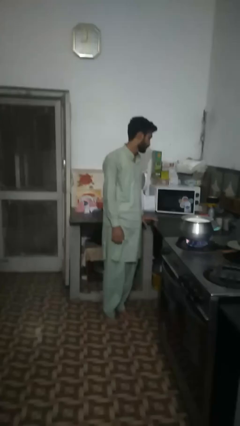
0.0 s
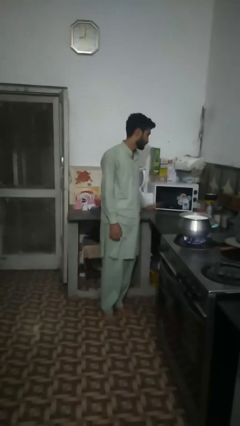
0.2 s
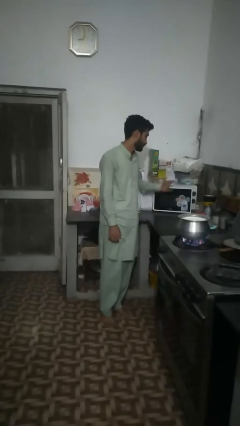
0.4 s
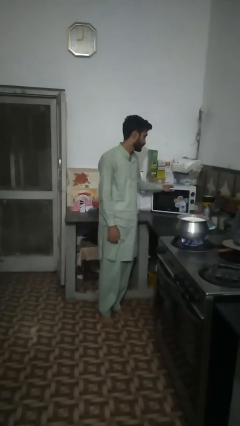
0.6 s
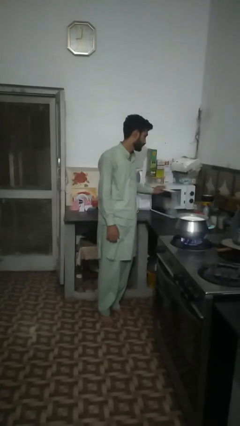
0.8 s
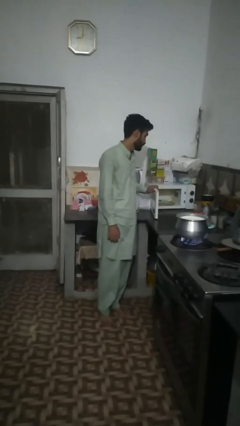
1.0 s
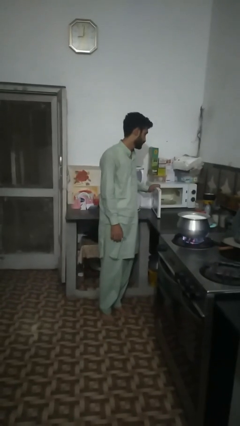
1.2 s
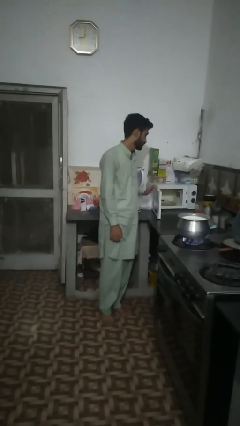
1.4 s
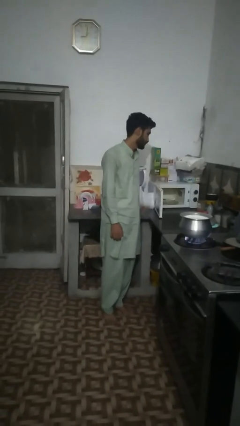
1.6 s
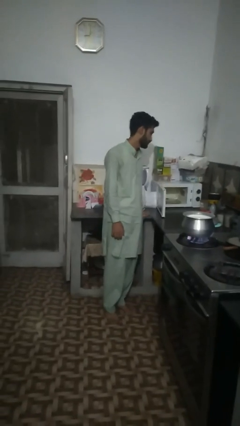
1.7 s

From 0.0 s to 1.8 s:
person opens microwave

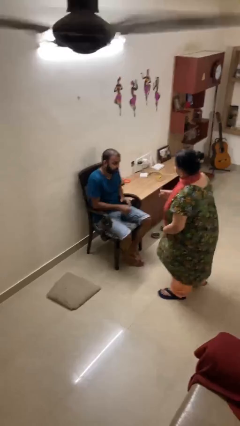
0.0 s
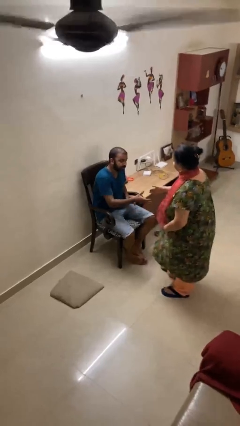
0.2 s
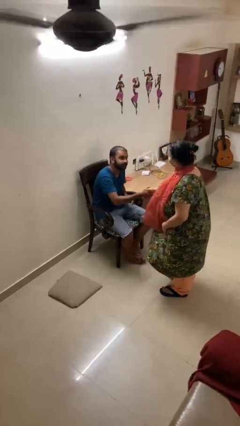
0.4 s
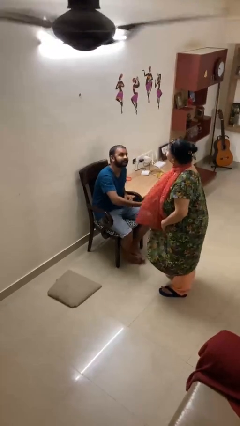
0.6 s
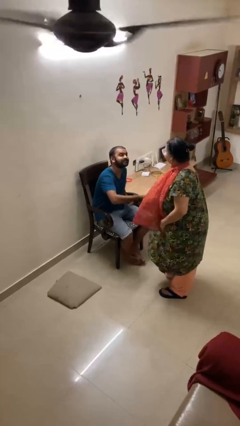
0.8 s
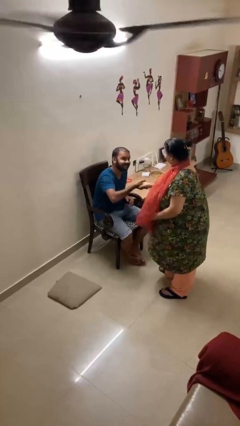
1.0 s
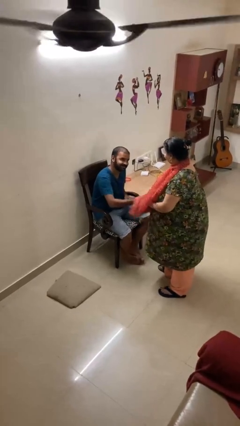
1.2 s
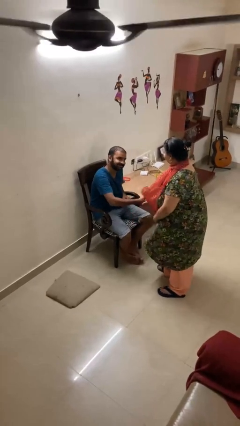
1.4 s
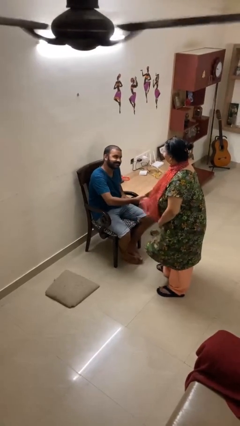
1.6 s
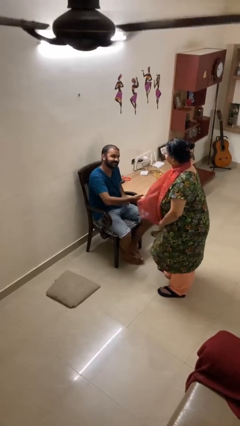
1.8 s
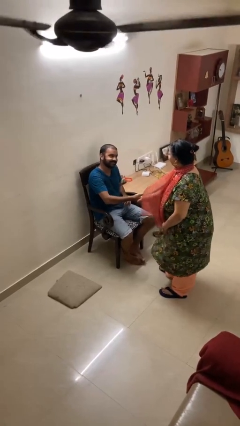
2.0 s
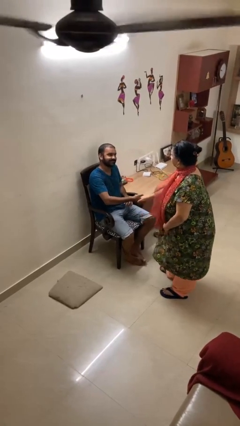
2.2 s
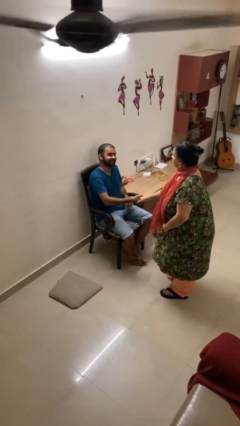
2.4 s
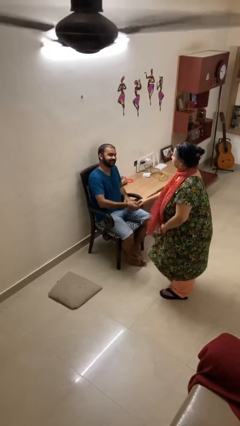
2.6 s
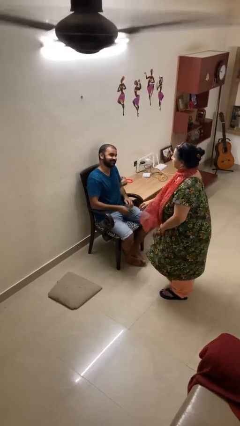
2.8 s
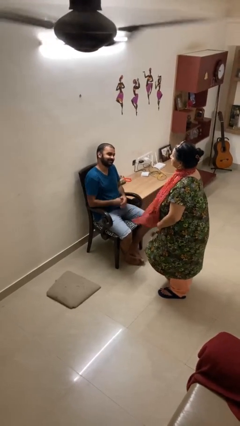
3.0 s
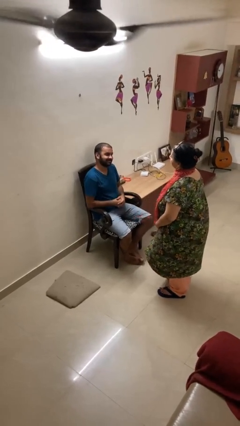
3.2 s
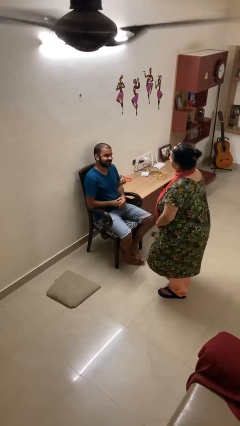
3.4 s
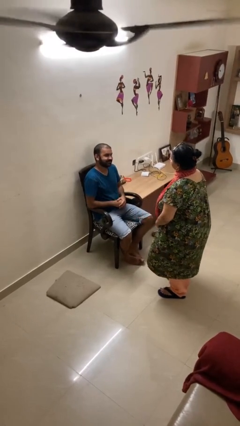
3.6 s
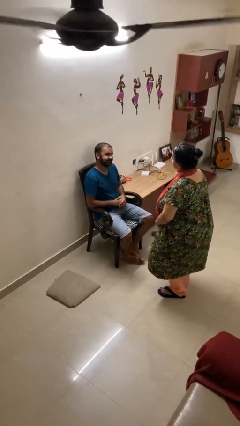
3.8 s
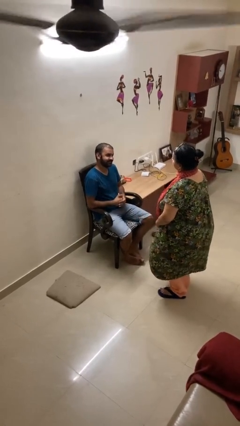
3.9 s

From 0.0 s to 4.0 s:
person shakes hand

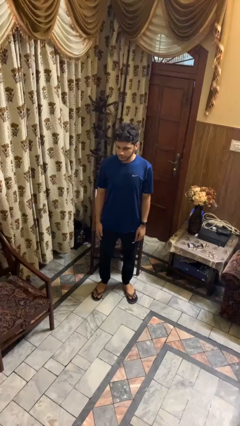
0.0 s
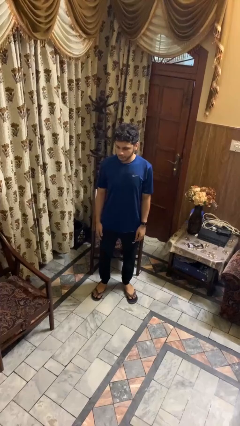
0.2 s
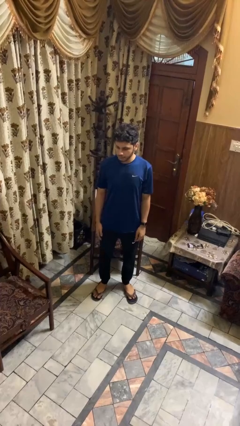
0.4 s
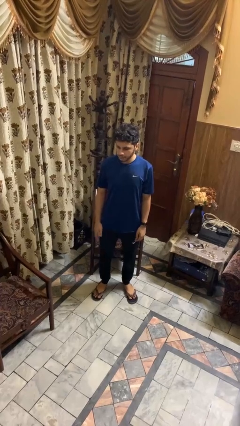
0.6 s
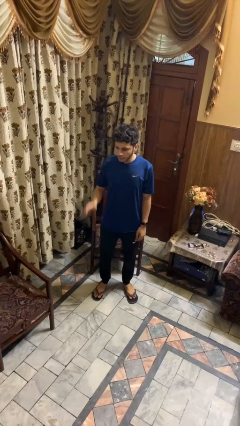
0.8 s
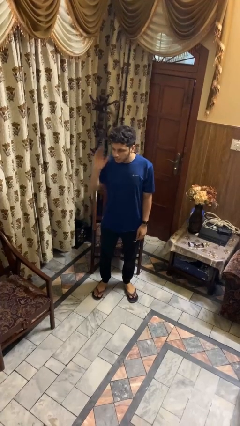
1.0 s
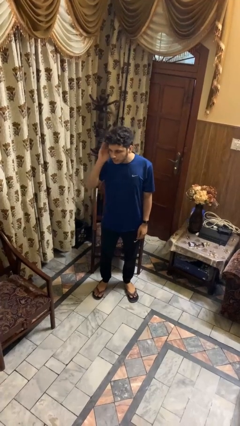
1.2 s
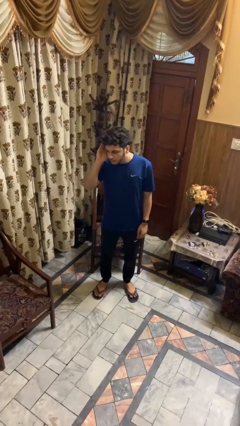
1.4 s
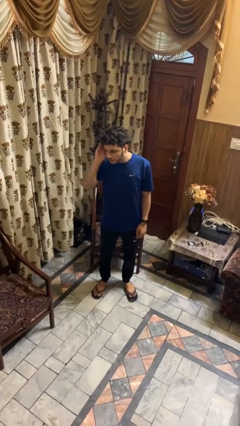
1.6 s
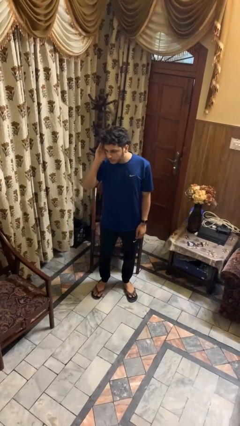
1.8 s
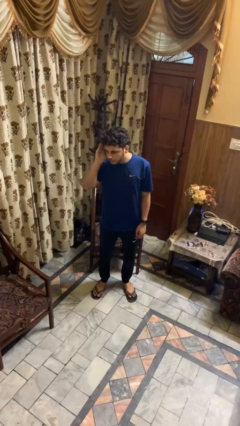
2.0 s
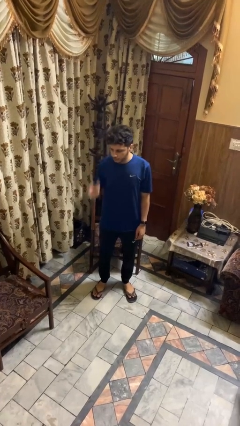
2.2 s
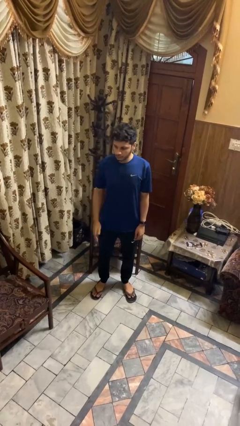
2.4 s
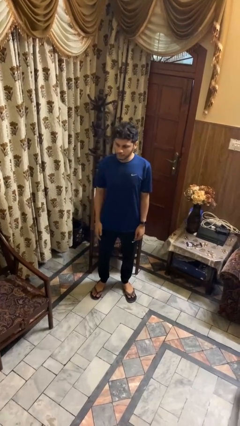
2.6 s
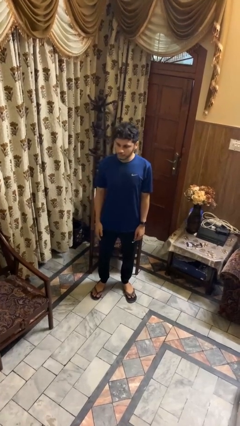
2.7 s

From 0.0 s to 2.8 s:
person gestures listen closely

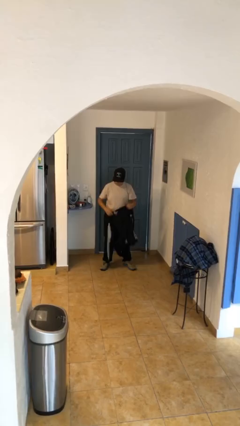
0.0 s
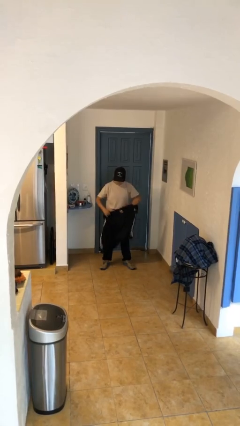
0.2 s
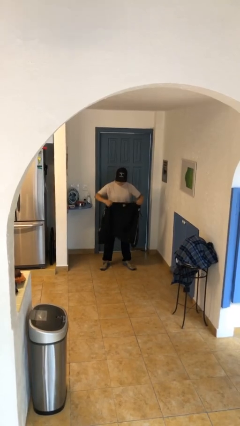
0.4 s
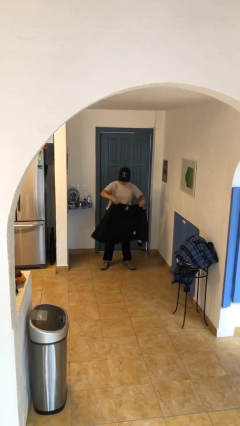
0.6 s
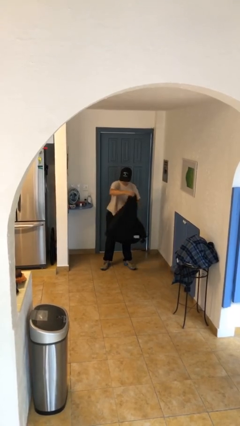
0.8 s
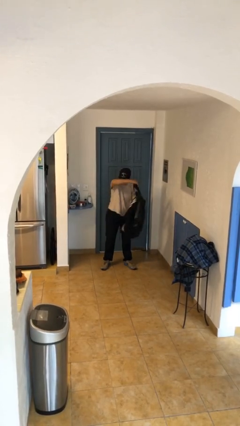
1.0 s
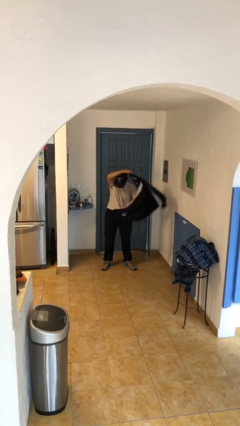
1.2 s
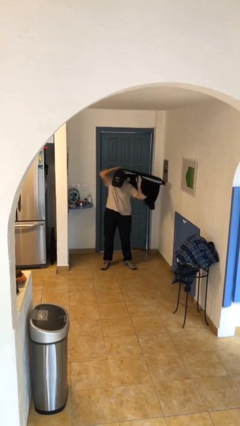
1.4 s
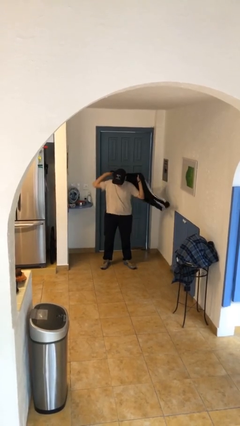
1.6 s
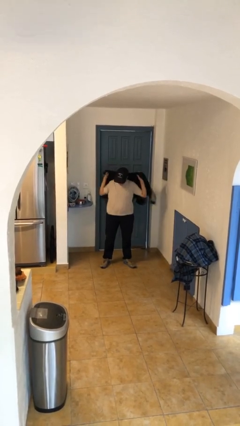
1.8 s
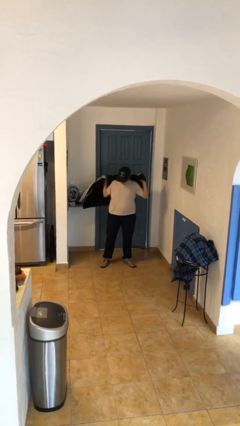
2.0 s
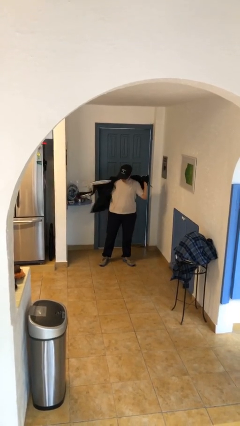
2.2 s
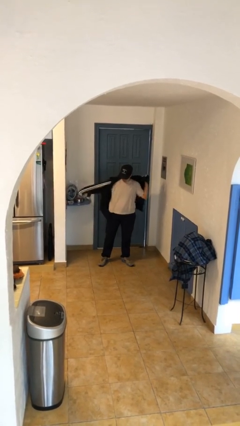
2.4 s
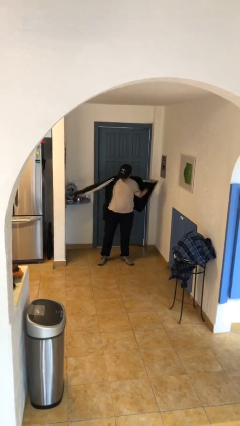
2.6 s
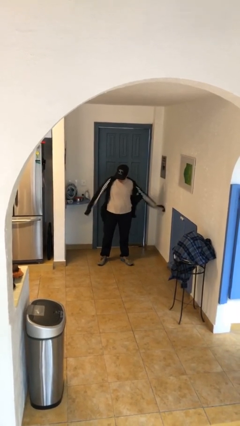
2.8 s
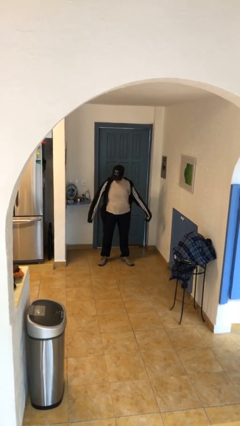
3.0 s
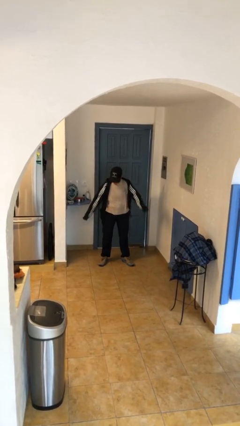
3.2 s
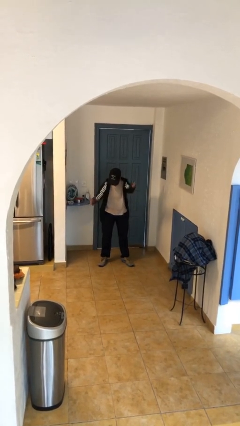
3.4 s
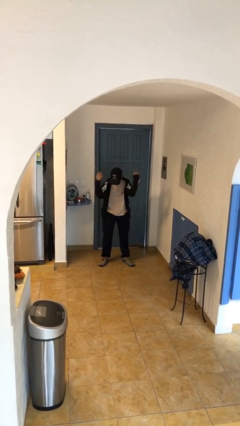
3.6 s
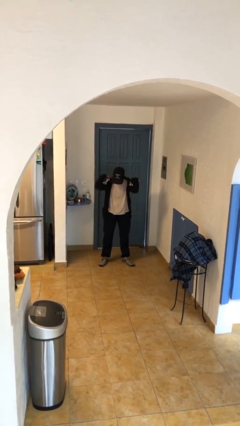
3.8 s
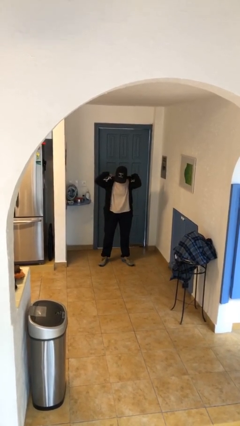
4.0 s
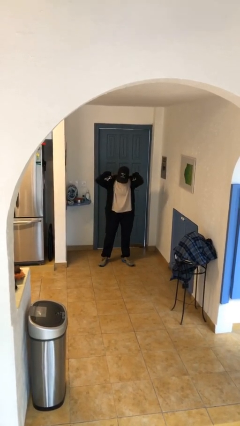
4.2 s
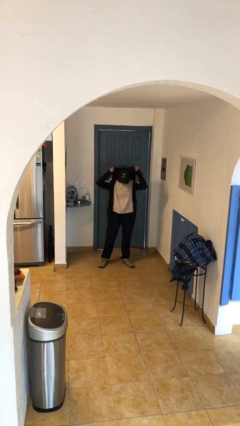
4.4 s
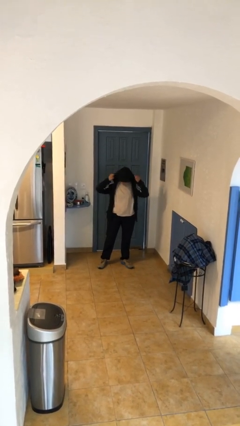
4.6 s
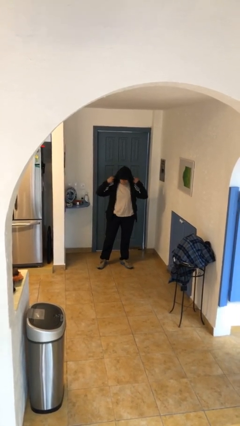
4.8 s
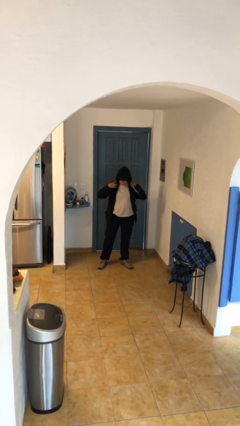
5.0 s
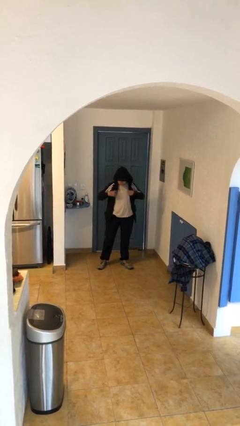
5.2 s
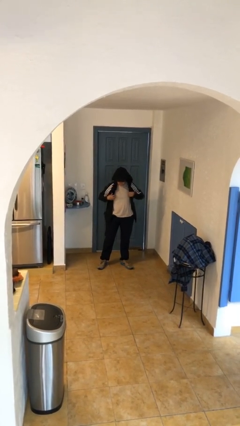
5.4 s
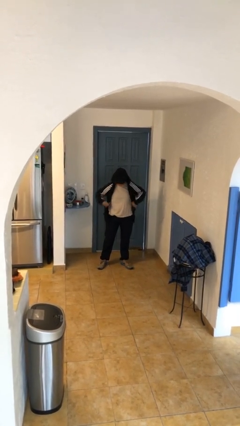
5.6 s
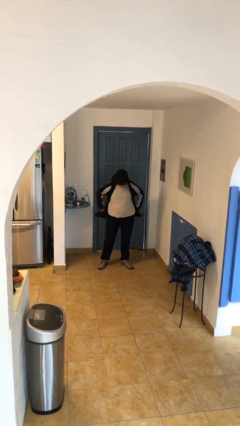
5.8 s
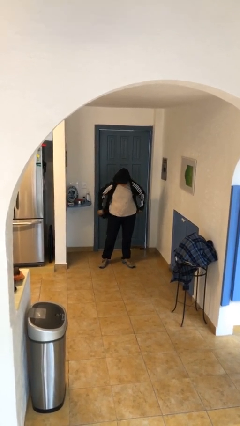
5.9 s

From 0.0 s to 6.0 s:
person puts on hoodie

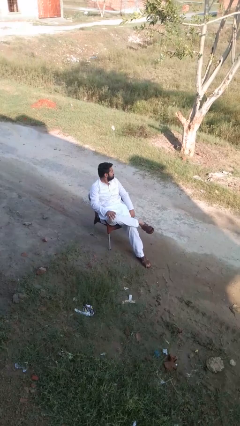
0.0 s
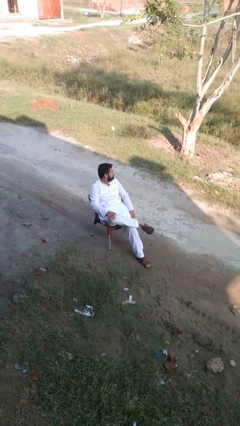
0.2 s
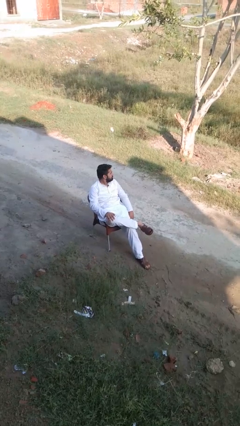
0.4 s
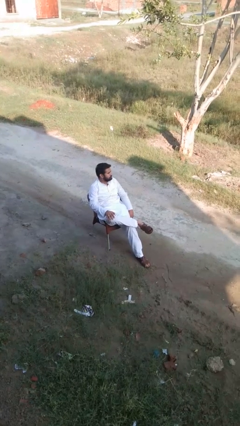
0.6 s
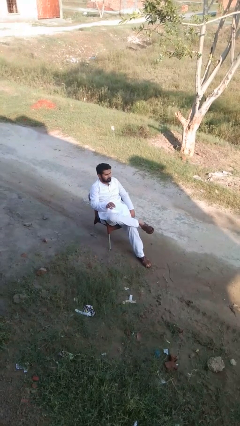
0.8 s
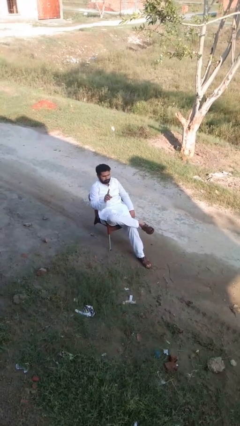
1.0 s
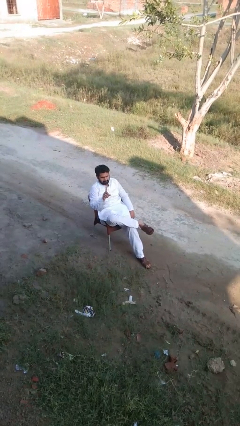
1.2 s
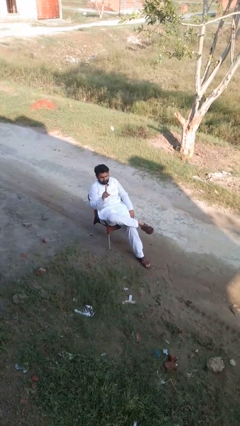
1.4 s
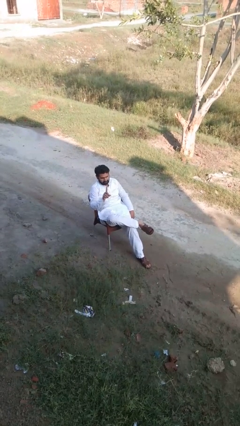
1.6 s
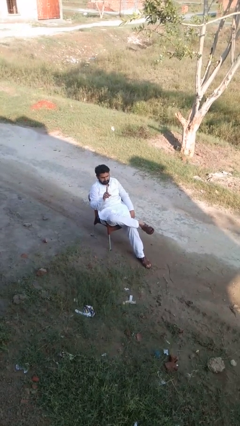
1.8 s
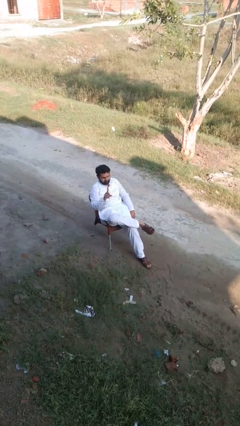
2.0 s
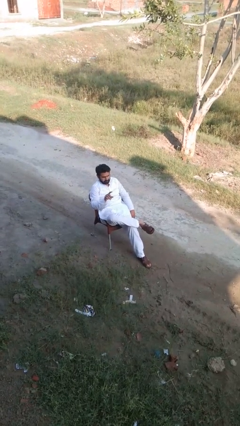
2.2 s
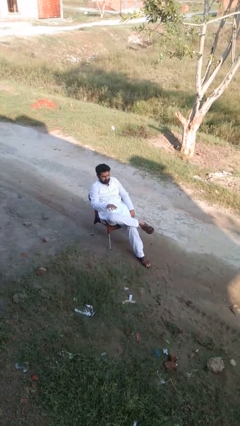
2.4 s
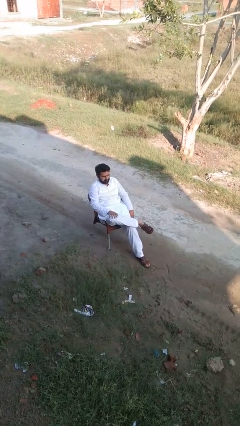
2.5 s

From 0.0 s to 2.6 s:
person gestures number one

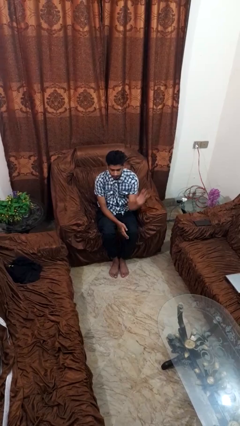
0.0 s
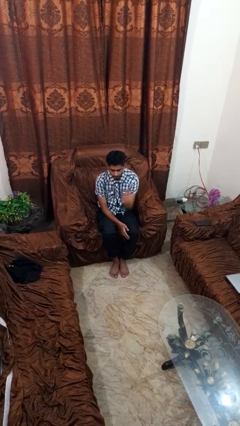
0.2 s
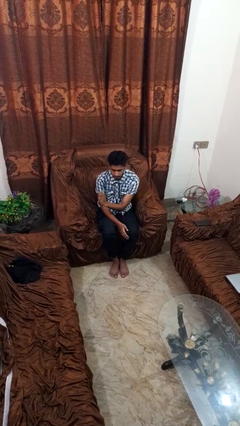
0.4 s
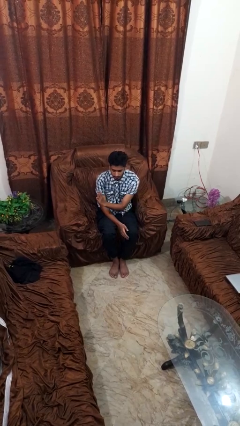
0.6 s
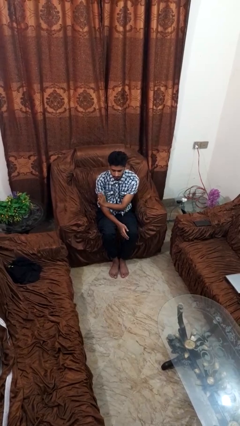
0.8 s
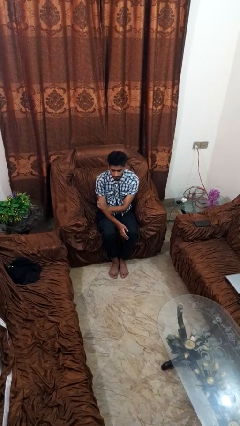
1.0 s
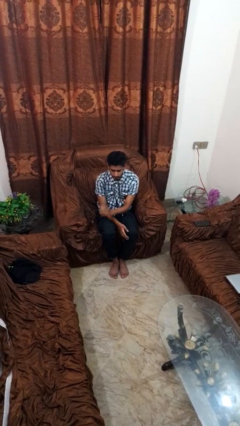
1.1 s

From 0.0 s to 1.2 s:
person gestures swipe right
